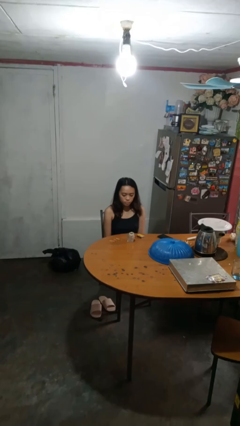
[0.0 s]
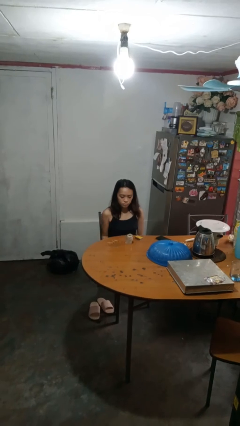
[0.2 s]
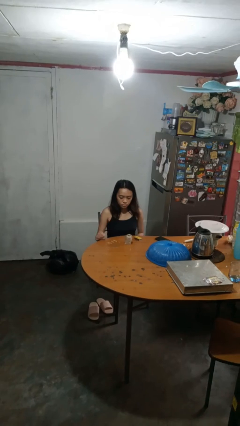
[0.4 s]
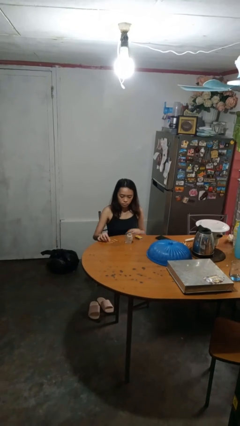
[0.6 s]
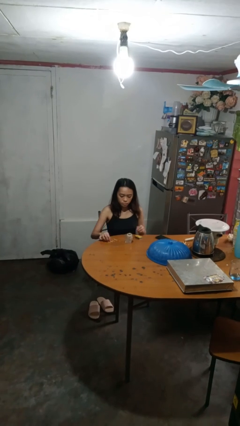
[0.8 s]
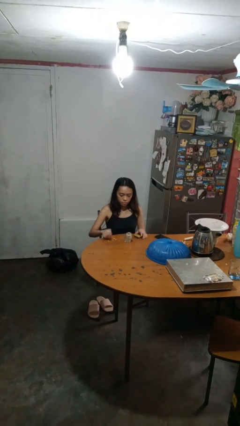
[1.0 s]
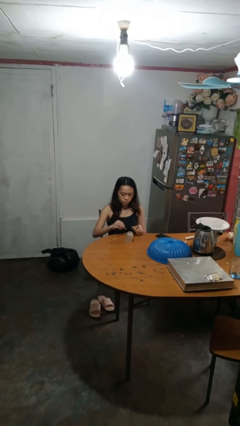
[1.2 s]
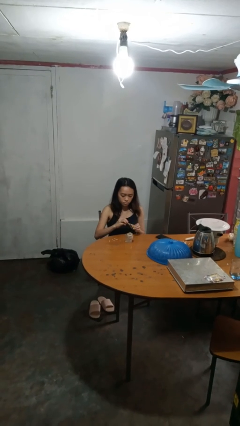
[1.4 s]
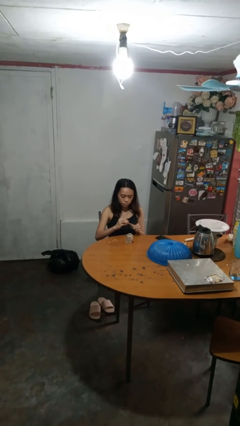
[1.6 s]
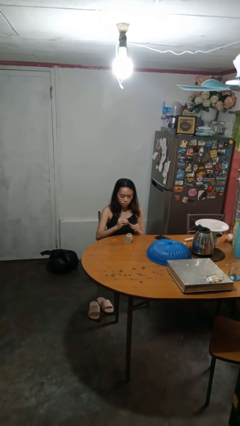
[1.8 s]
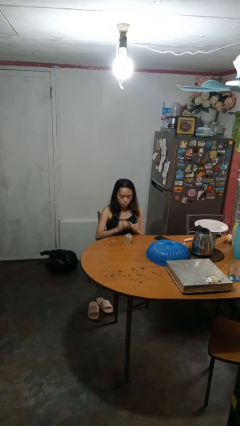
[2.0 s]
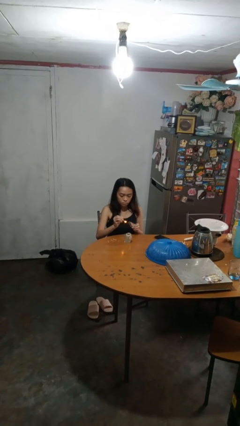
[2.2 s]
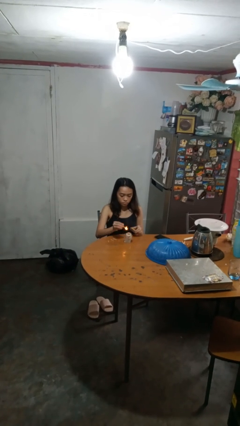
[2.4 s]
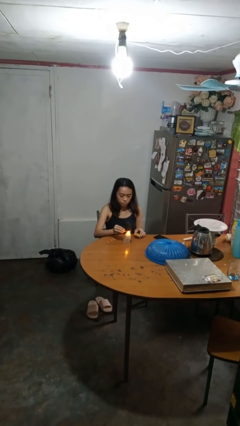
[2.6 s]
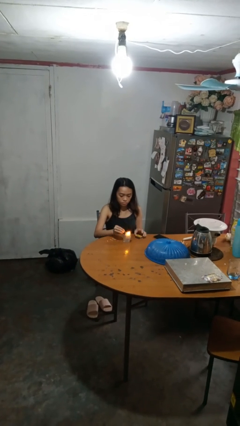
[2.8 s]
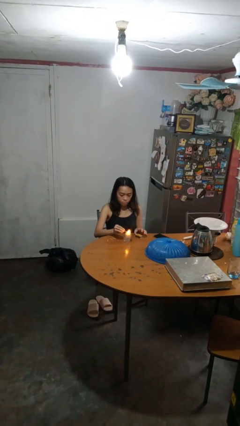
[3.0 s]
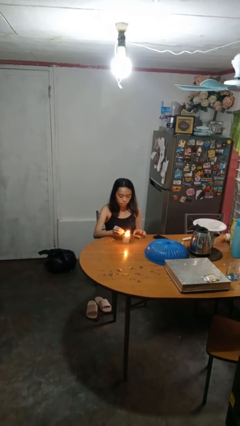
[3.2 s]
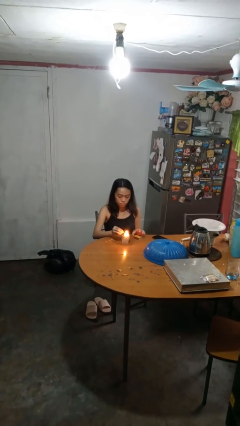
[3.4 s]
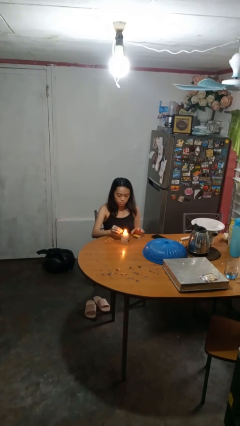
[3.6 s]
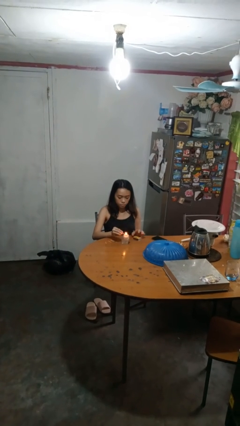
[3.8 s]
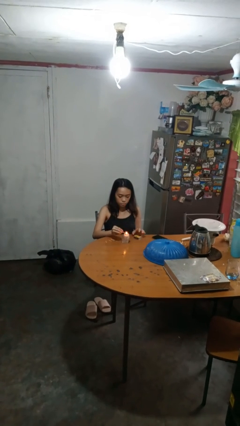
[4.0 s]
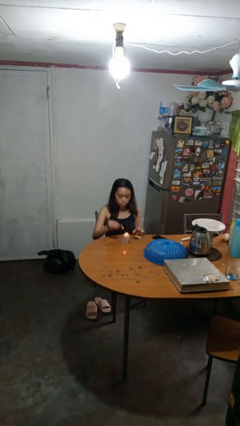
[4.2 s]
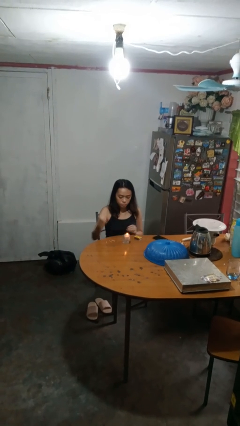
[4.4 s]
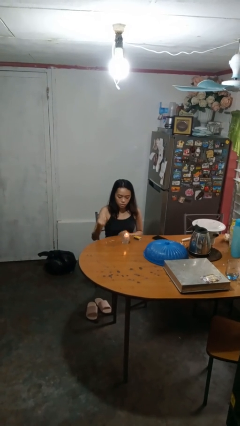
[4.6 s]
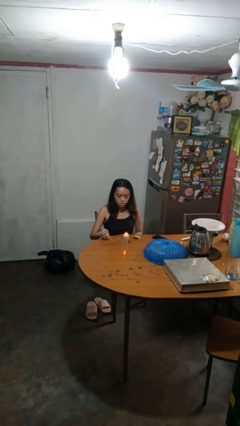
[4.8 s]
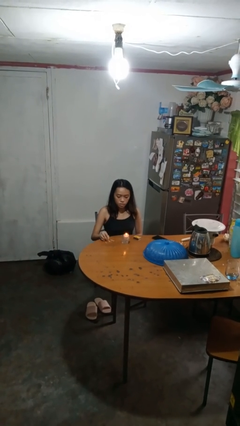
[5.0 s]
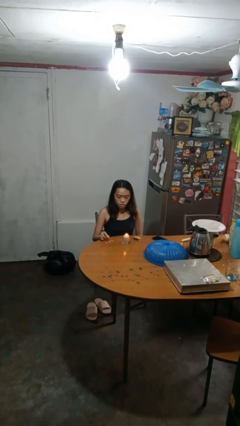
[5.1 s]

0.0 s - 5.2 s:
person lights candle

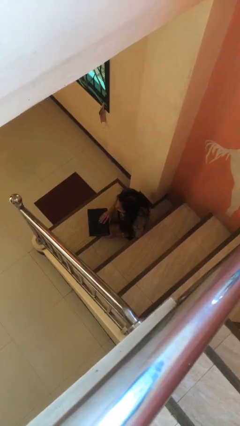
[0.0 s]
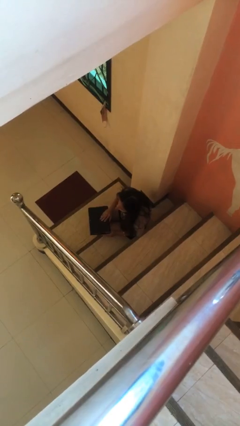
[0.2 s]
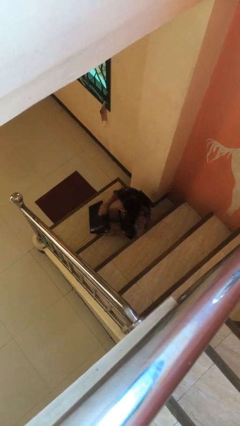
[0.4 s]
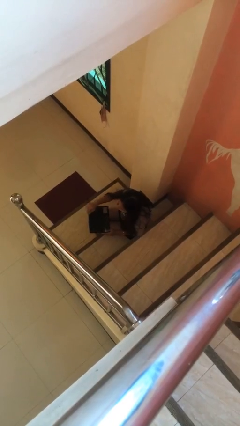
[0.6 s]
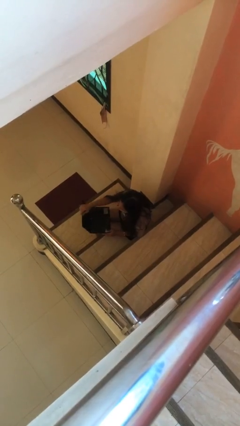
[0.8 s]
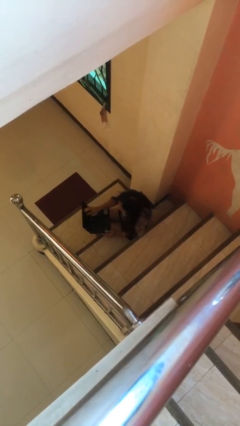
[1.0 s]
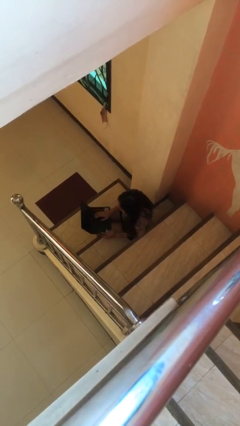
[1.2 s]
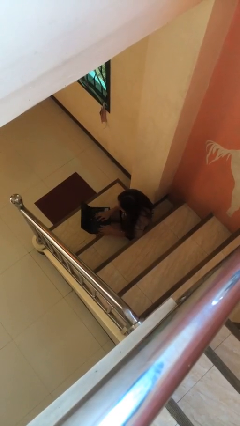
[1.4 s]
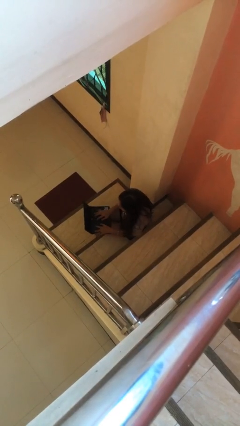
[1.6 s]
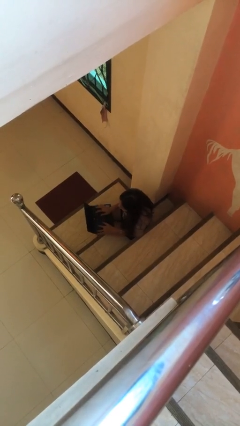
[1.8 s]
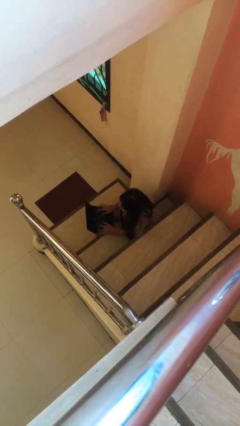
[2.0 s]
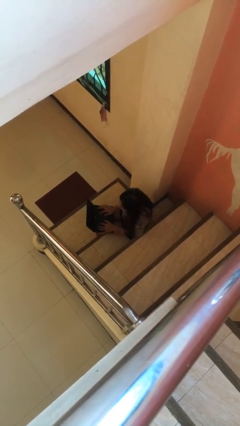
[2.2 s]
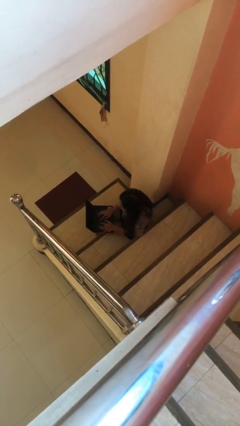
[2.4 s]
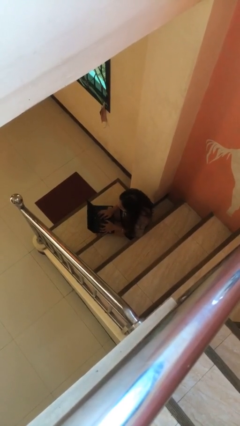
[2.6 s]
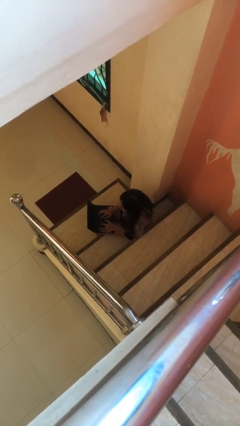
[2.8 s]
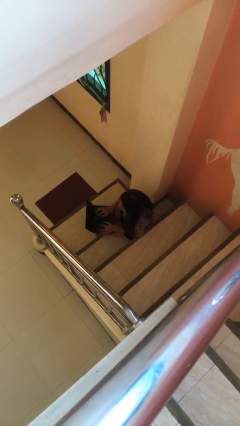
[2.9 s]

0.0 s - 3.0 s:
person interacts with laptop

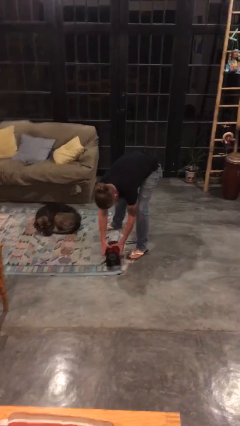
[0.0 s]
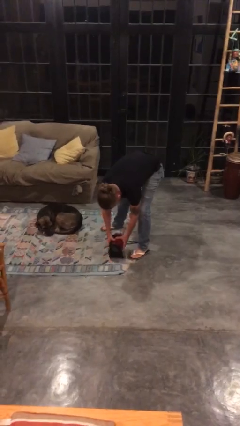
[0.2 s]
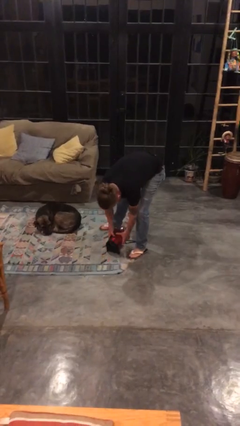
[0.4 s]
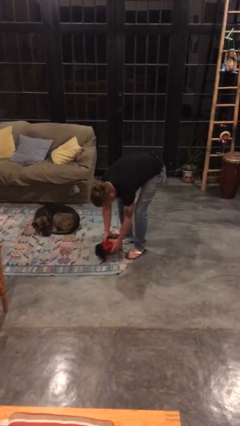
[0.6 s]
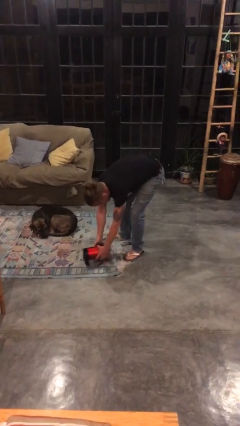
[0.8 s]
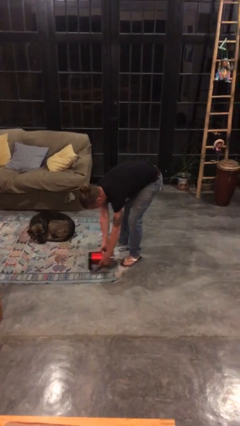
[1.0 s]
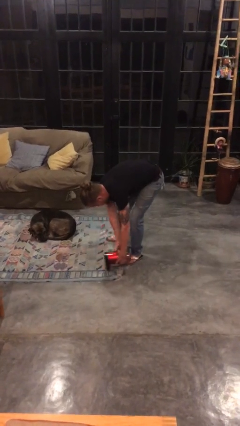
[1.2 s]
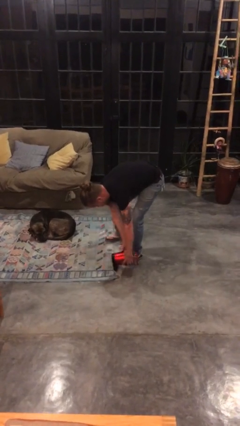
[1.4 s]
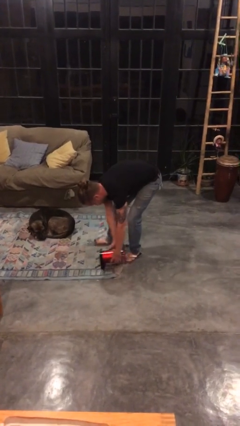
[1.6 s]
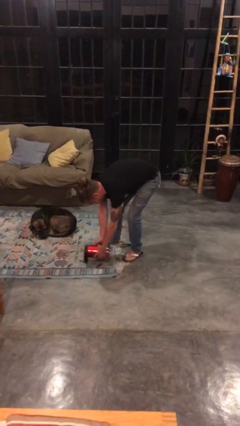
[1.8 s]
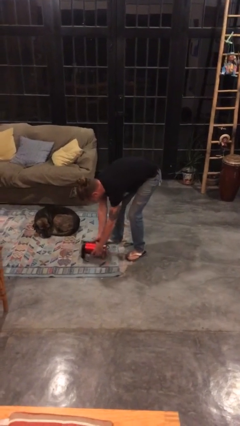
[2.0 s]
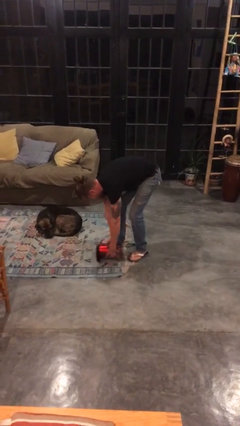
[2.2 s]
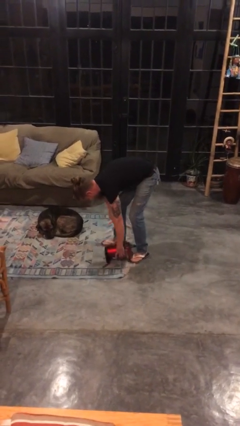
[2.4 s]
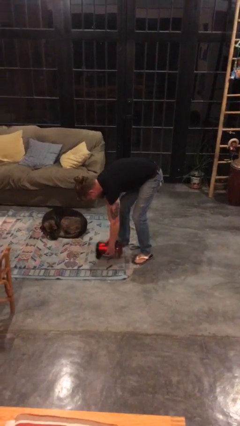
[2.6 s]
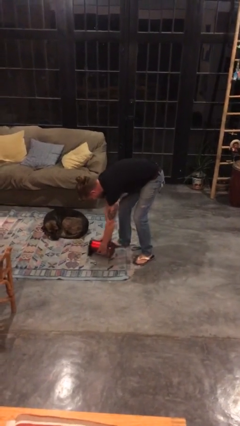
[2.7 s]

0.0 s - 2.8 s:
person vacuums carpet

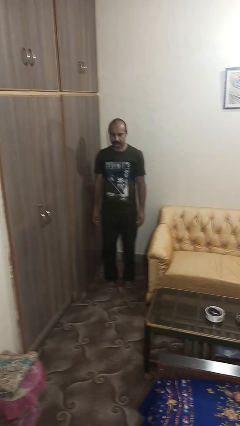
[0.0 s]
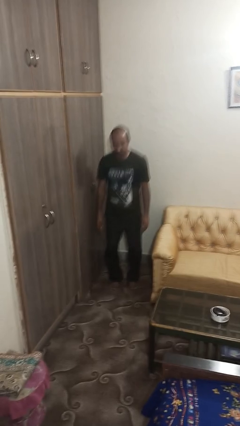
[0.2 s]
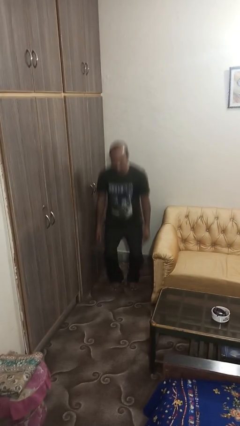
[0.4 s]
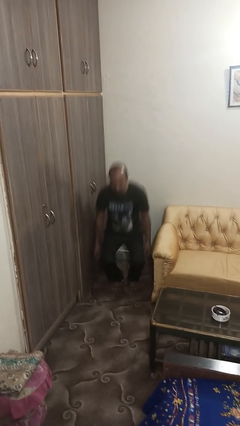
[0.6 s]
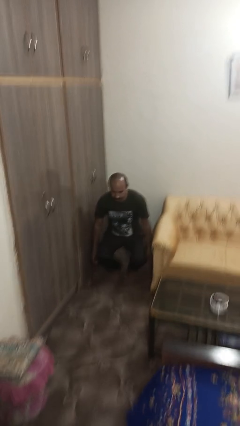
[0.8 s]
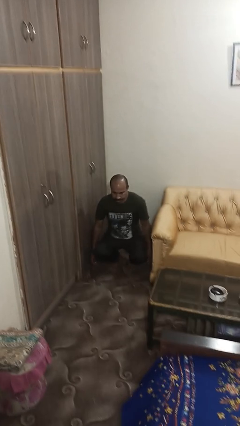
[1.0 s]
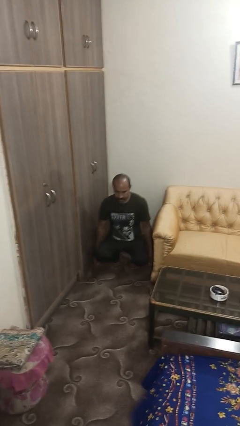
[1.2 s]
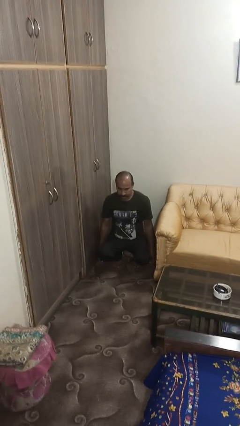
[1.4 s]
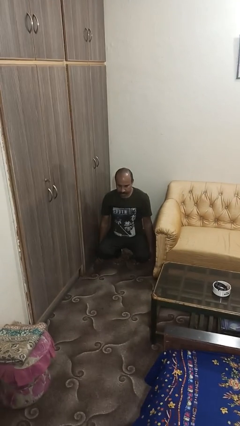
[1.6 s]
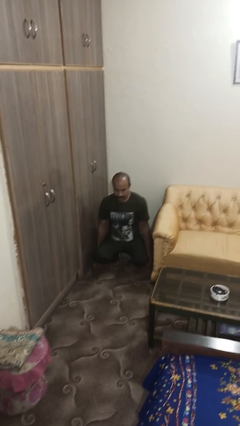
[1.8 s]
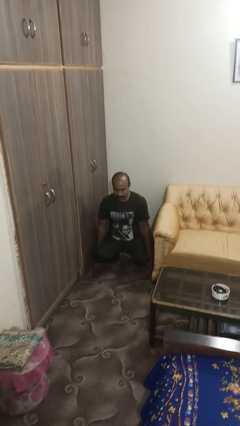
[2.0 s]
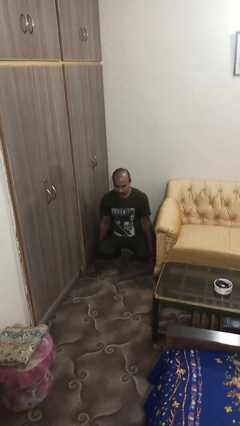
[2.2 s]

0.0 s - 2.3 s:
person squats

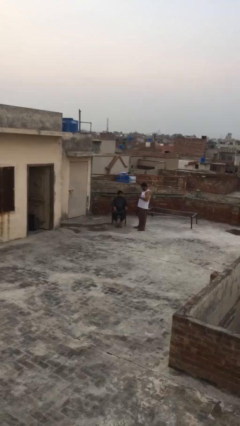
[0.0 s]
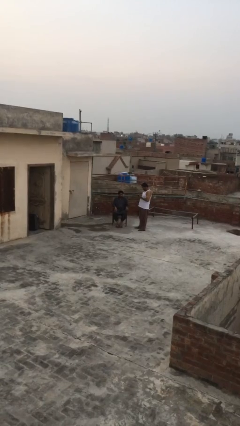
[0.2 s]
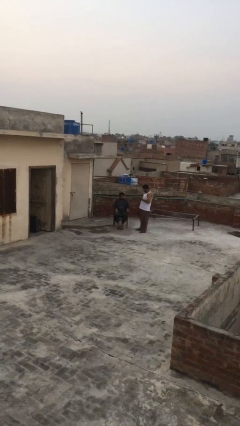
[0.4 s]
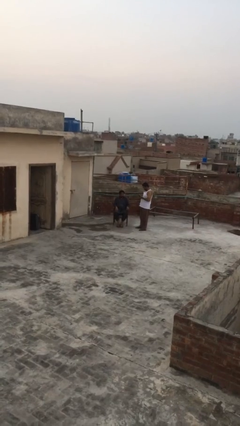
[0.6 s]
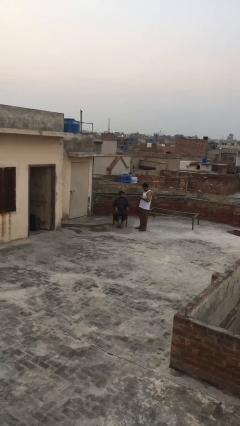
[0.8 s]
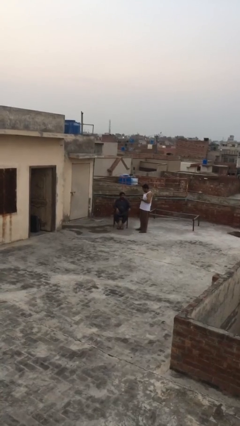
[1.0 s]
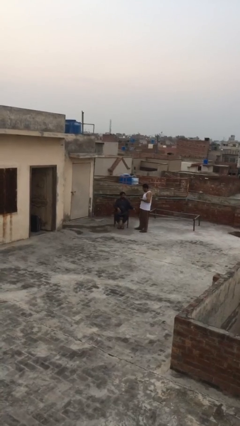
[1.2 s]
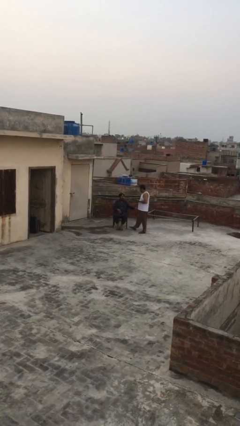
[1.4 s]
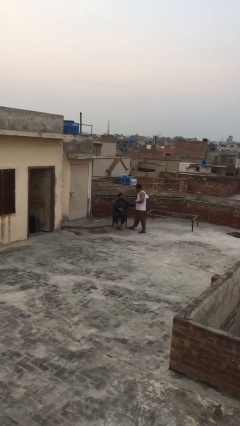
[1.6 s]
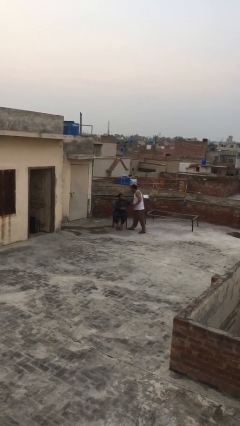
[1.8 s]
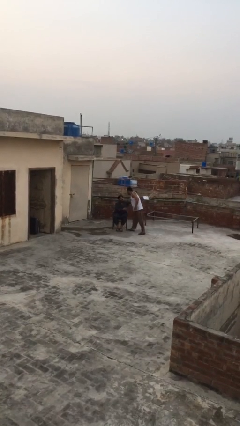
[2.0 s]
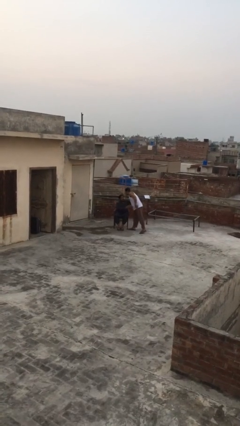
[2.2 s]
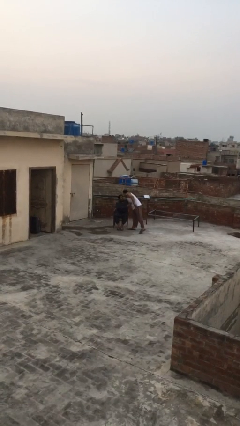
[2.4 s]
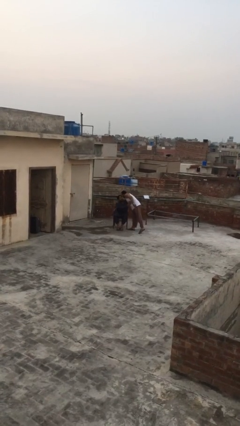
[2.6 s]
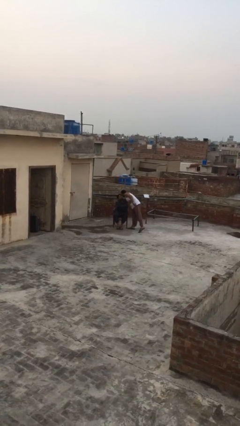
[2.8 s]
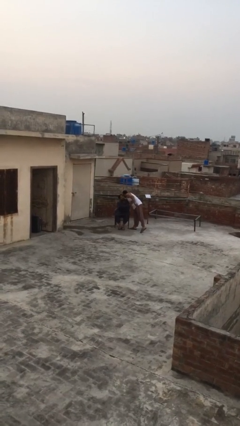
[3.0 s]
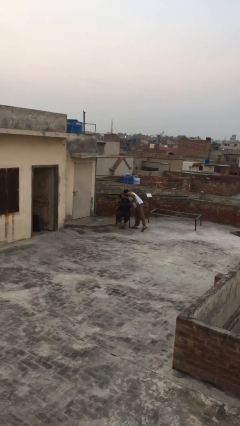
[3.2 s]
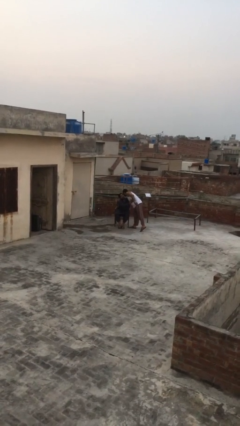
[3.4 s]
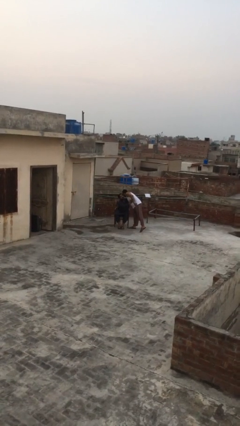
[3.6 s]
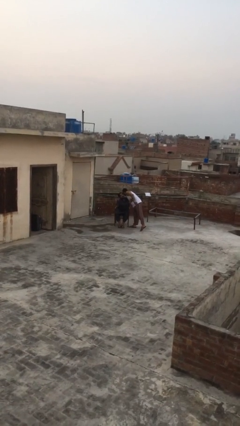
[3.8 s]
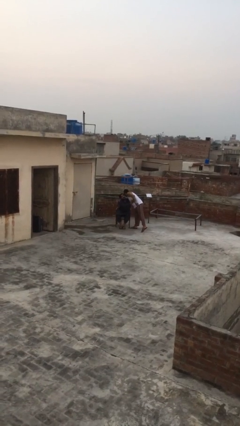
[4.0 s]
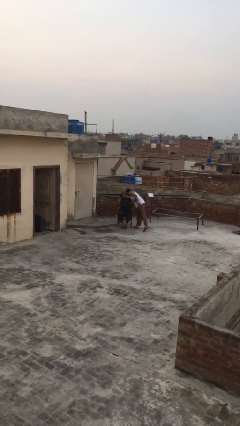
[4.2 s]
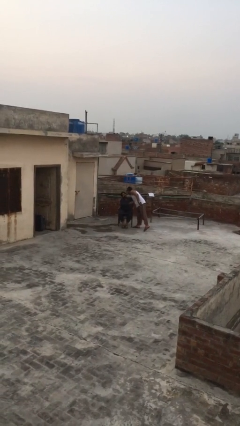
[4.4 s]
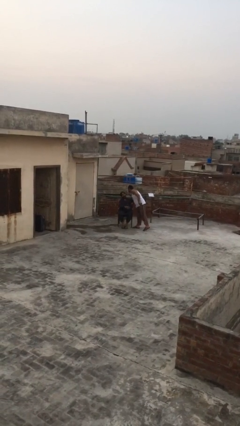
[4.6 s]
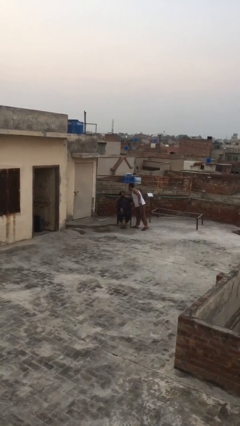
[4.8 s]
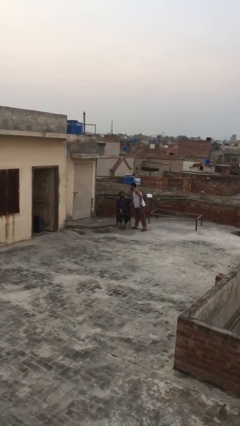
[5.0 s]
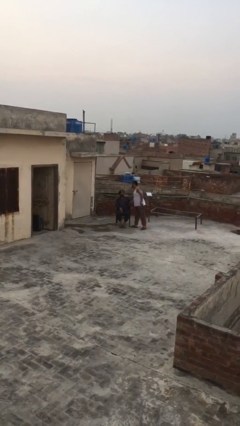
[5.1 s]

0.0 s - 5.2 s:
person embraces person
